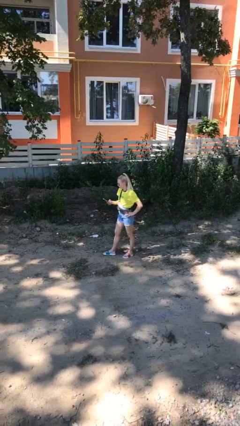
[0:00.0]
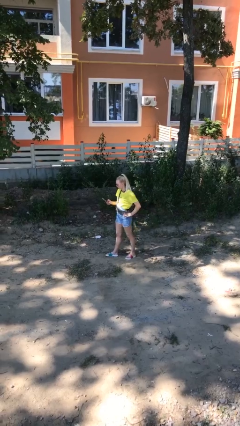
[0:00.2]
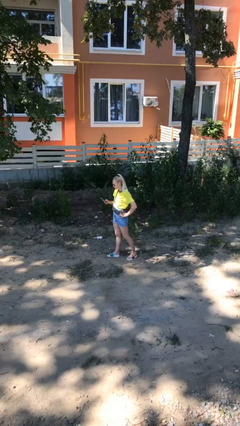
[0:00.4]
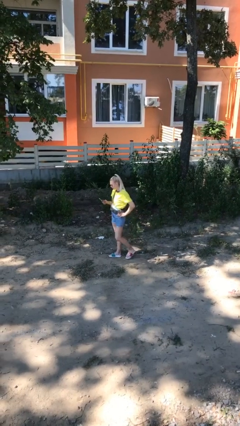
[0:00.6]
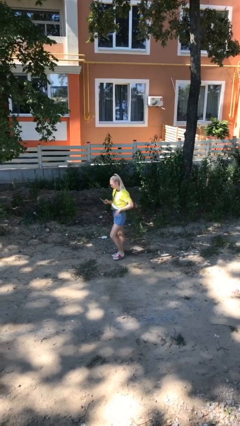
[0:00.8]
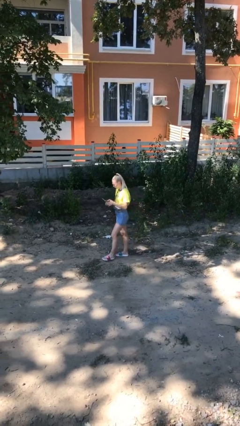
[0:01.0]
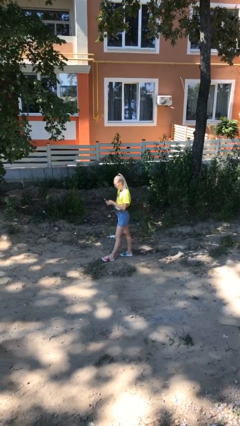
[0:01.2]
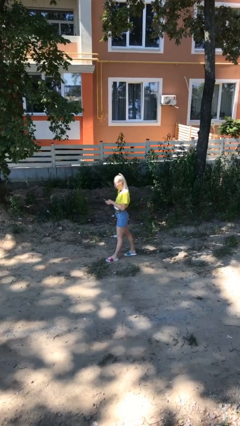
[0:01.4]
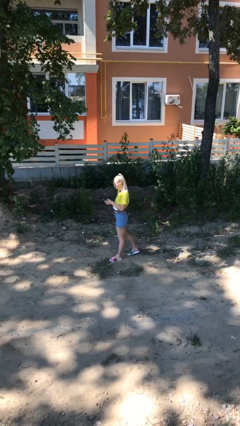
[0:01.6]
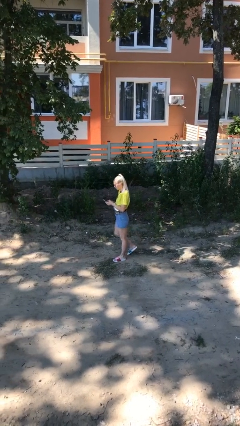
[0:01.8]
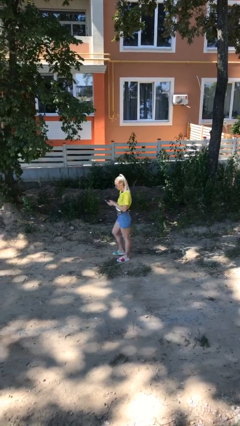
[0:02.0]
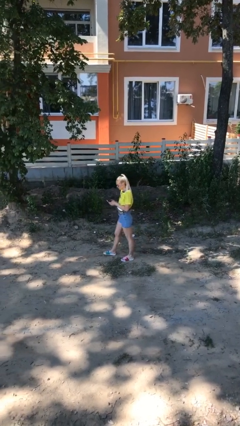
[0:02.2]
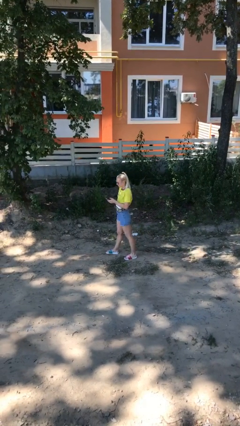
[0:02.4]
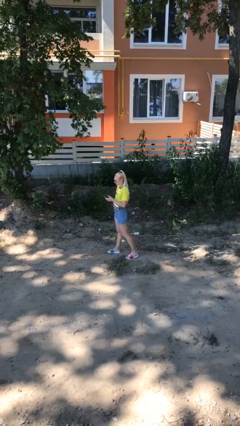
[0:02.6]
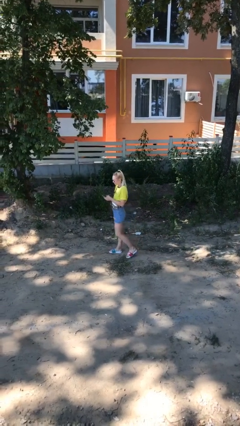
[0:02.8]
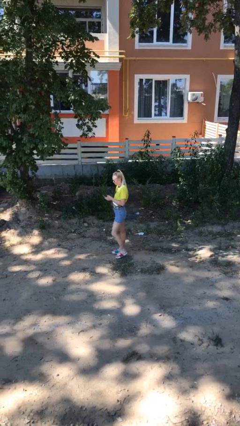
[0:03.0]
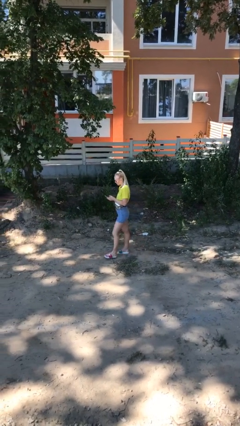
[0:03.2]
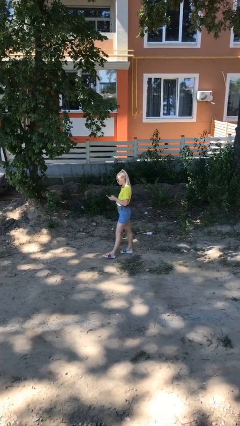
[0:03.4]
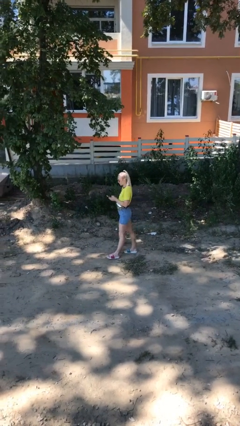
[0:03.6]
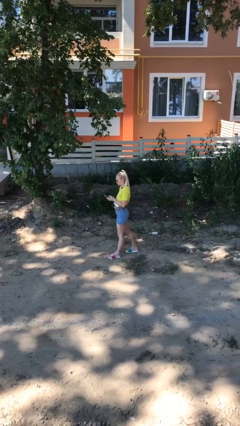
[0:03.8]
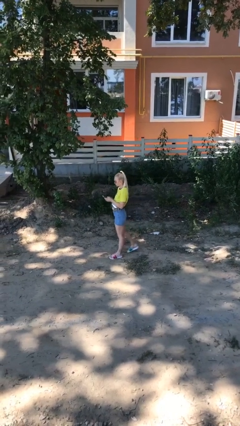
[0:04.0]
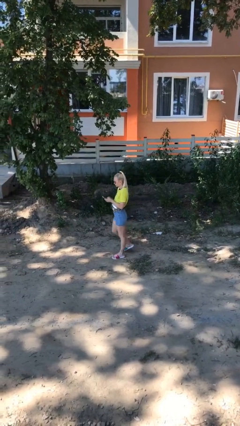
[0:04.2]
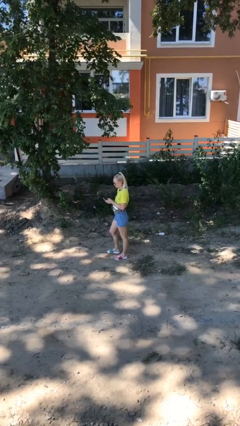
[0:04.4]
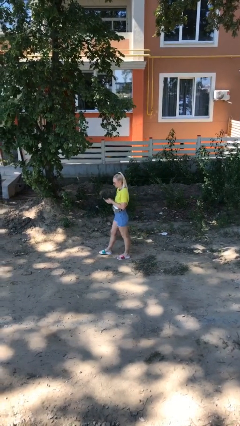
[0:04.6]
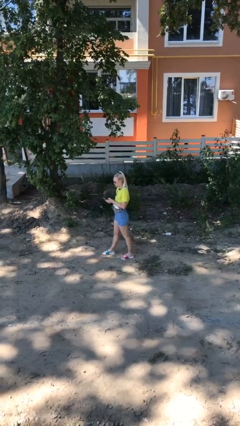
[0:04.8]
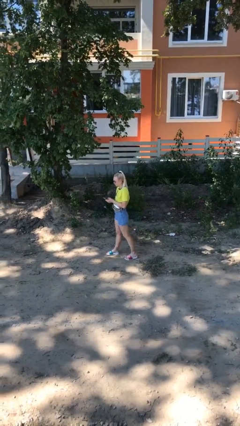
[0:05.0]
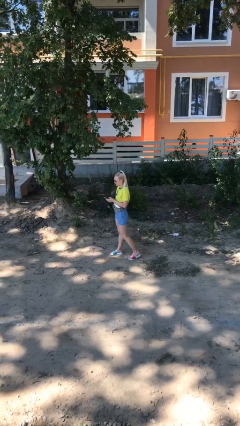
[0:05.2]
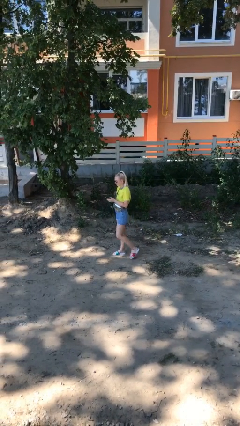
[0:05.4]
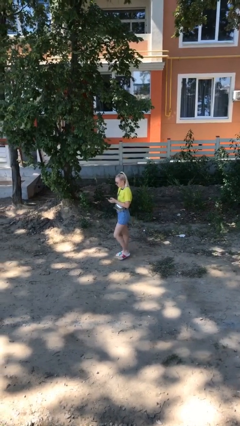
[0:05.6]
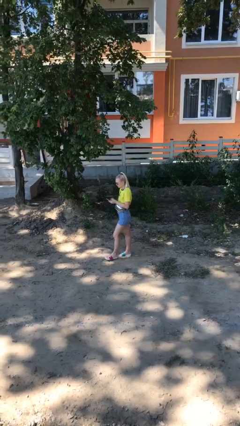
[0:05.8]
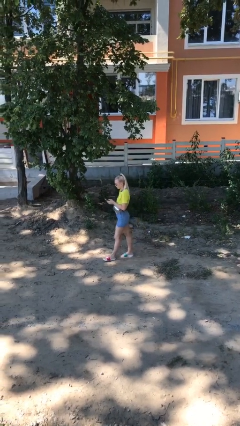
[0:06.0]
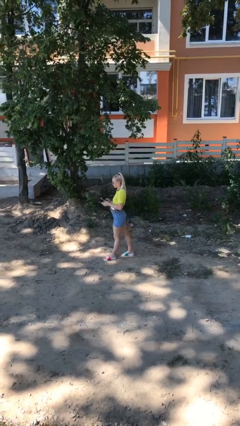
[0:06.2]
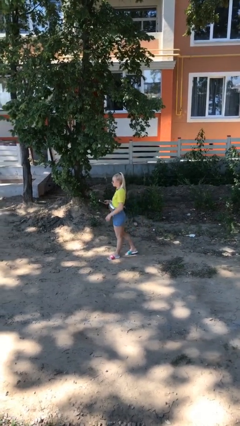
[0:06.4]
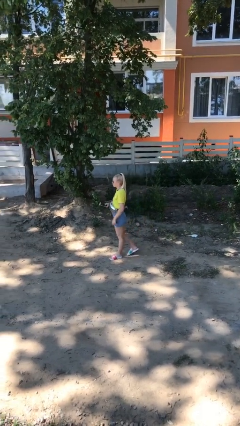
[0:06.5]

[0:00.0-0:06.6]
person texts on phone

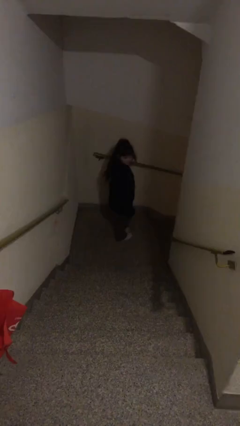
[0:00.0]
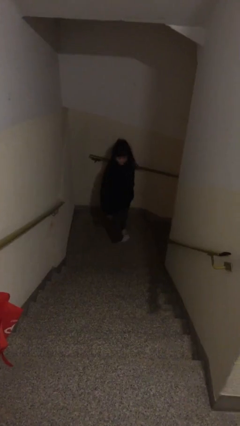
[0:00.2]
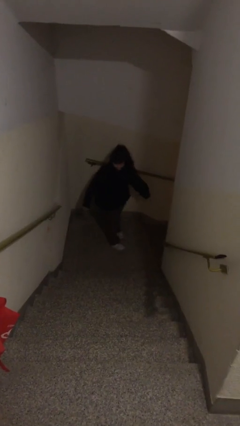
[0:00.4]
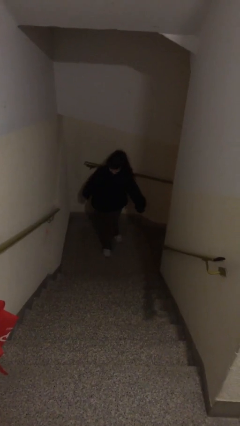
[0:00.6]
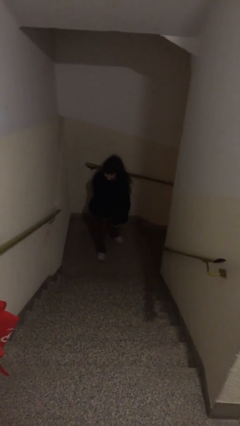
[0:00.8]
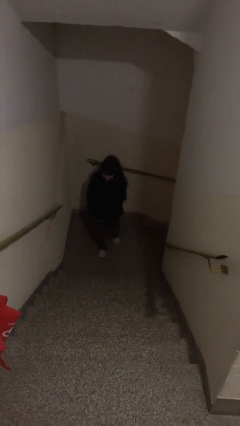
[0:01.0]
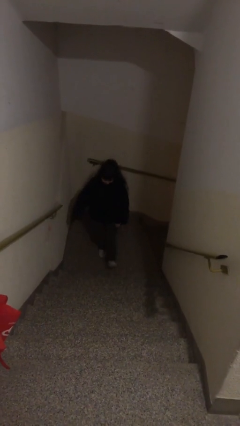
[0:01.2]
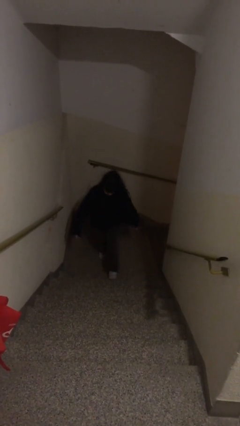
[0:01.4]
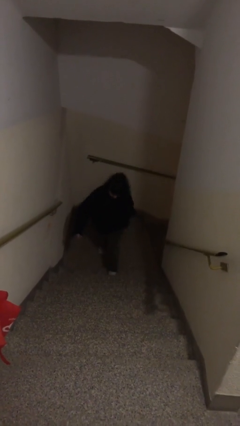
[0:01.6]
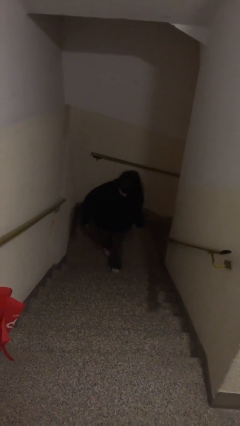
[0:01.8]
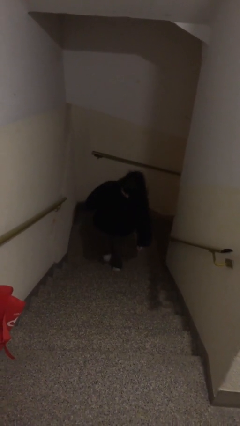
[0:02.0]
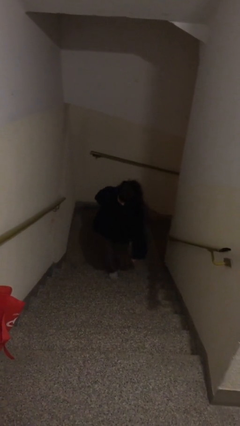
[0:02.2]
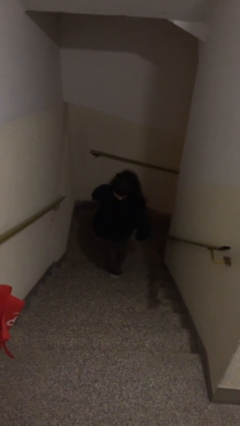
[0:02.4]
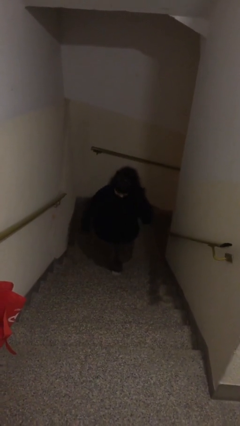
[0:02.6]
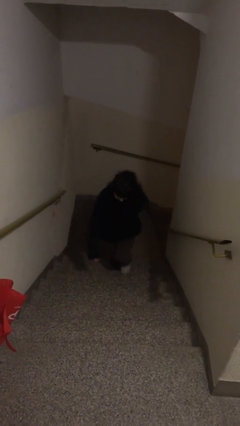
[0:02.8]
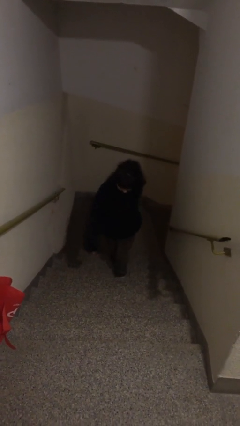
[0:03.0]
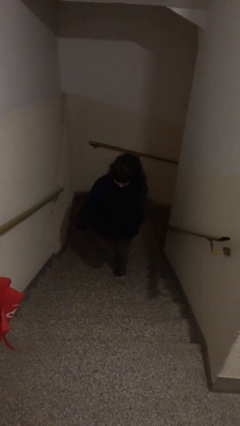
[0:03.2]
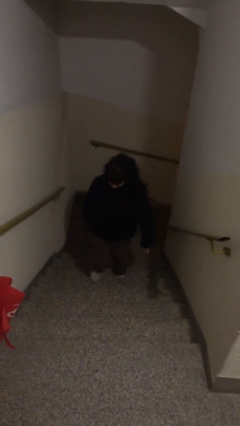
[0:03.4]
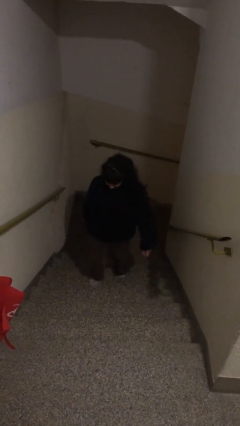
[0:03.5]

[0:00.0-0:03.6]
person climbs up stairs

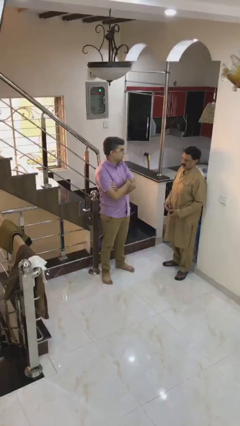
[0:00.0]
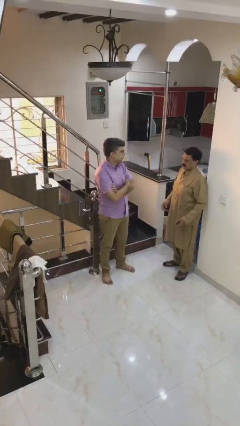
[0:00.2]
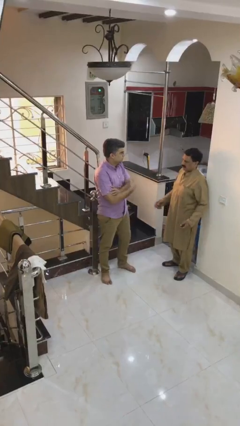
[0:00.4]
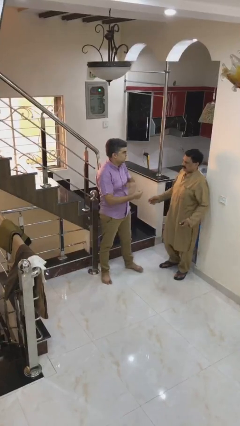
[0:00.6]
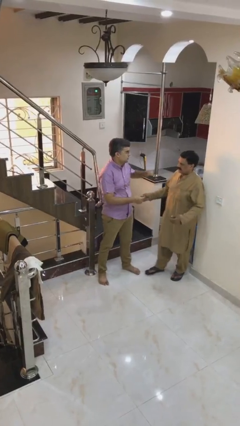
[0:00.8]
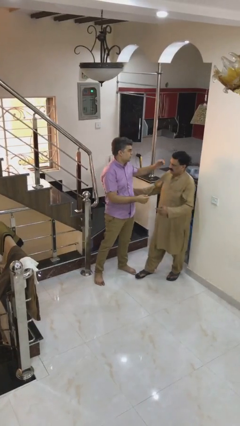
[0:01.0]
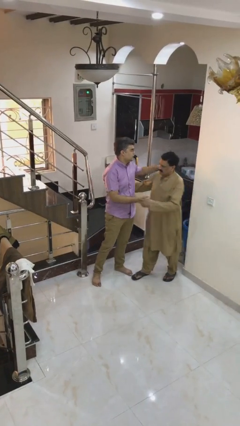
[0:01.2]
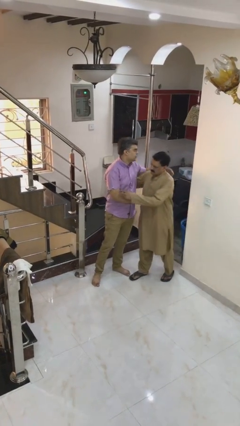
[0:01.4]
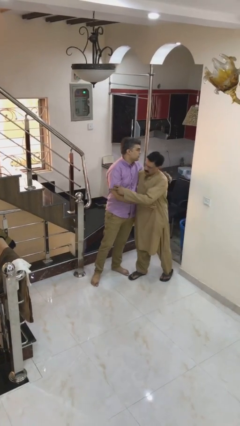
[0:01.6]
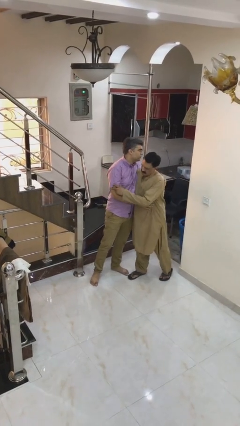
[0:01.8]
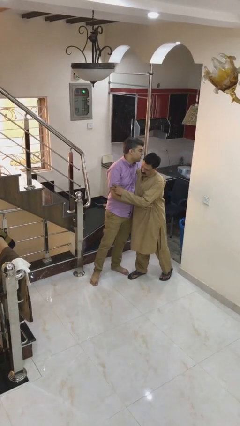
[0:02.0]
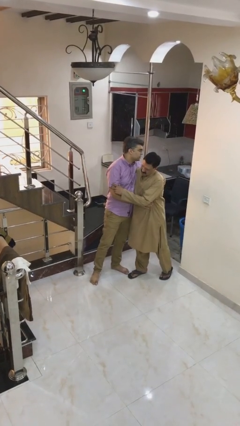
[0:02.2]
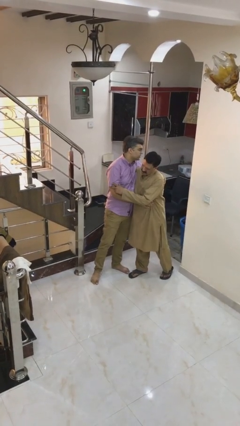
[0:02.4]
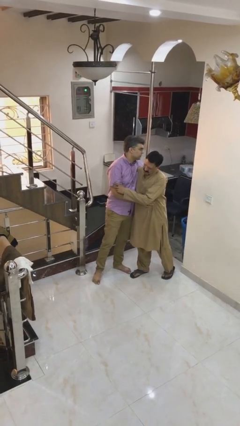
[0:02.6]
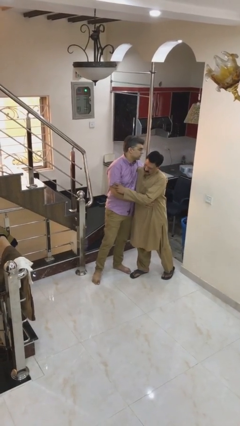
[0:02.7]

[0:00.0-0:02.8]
person embraces person

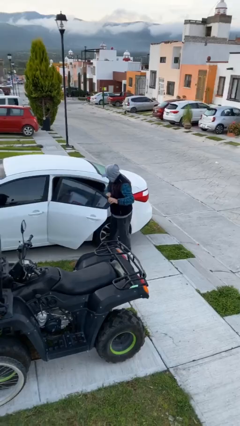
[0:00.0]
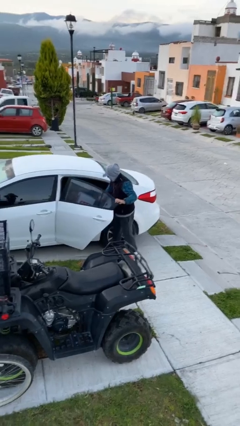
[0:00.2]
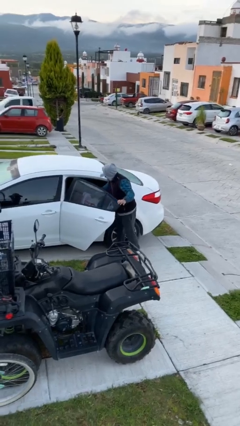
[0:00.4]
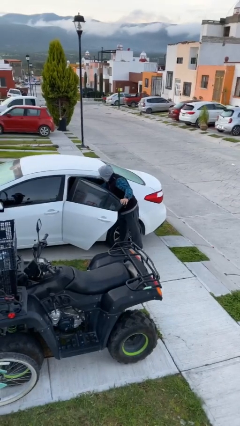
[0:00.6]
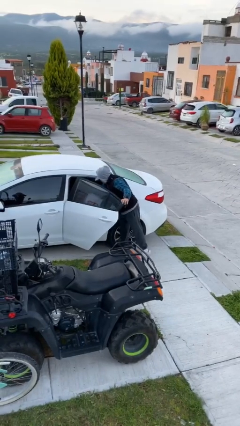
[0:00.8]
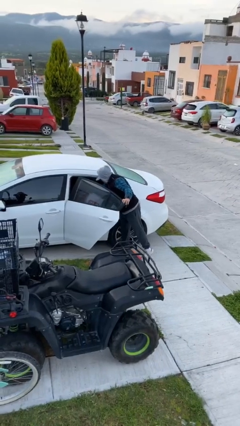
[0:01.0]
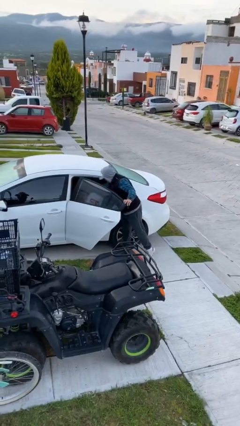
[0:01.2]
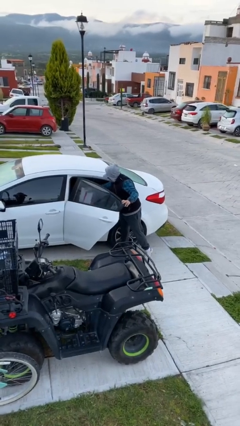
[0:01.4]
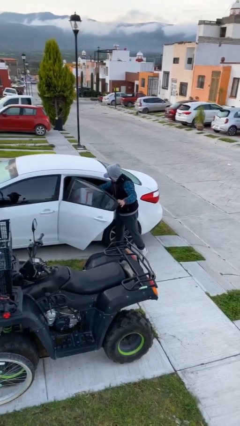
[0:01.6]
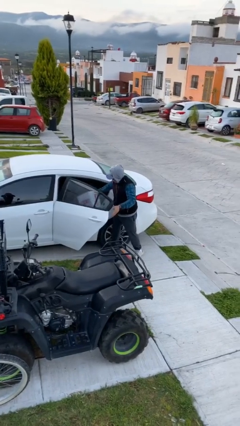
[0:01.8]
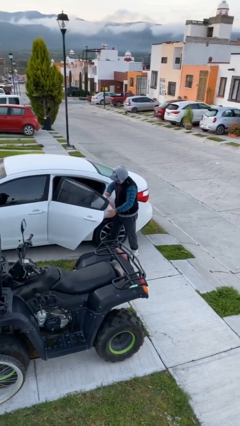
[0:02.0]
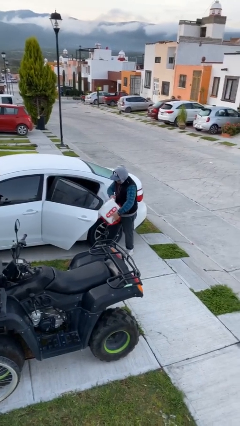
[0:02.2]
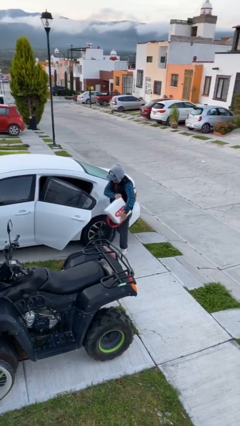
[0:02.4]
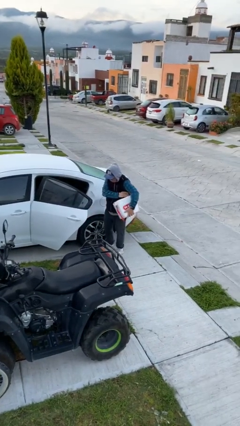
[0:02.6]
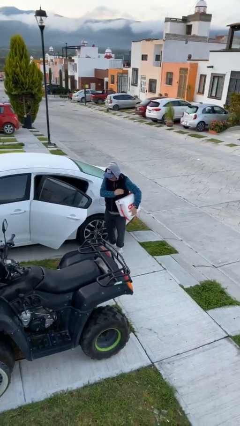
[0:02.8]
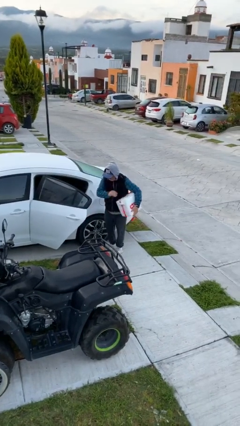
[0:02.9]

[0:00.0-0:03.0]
person unloads car

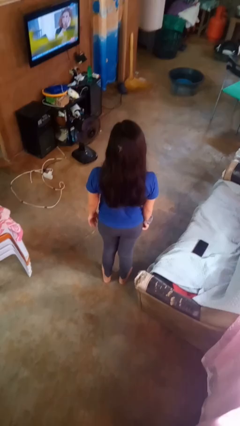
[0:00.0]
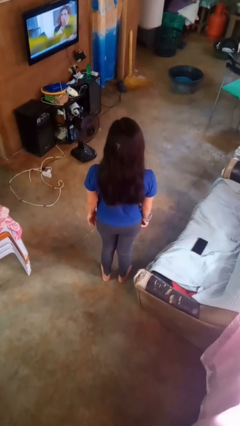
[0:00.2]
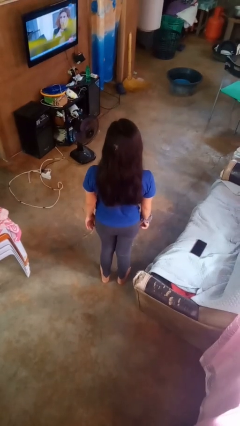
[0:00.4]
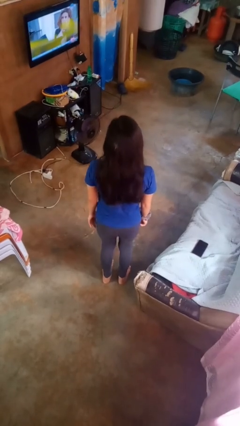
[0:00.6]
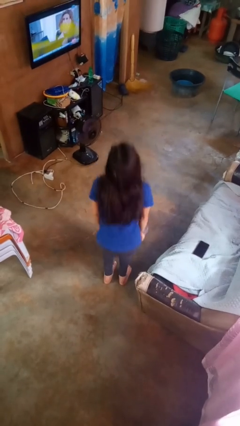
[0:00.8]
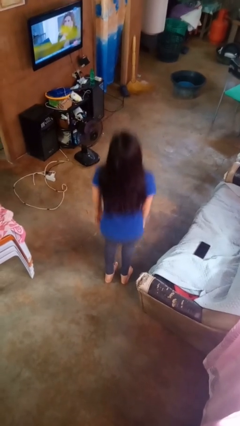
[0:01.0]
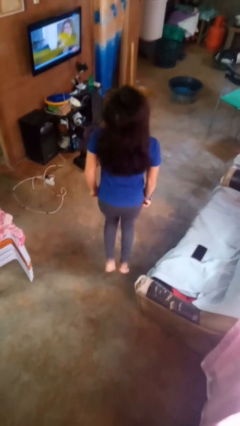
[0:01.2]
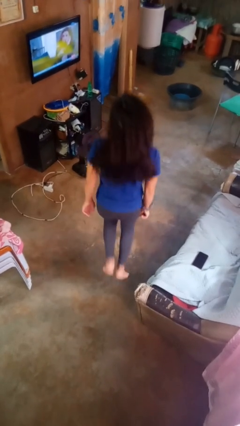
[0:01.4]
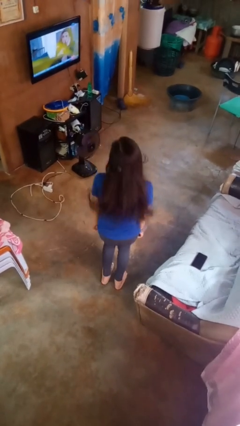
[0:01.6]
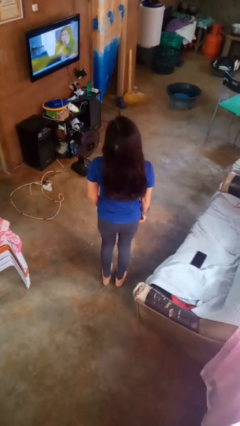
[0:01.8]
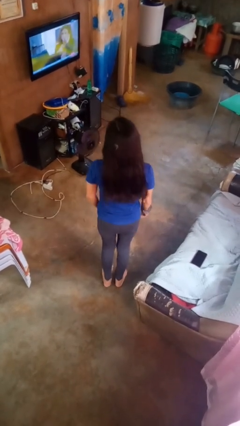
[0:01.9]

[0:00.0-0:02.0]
person jumps
